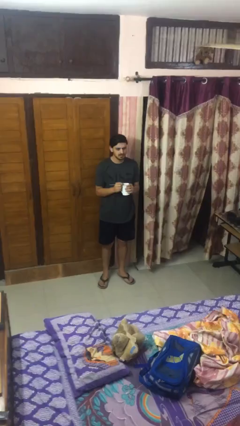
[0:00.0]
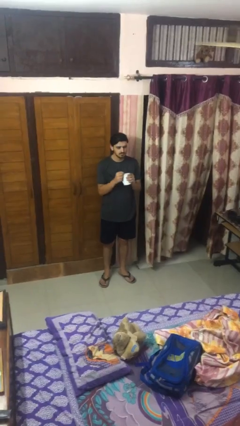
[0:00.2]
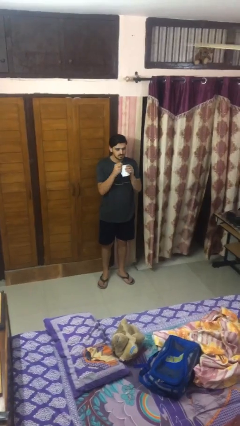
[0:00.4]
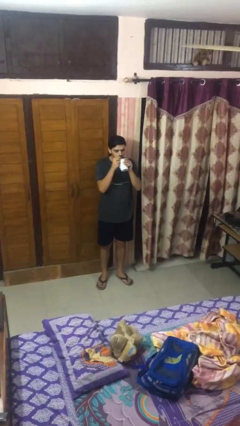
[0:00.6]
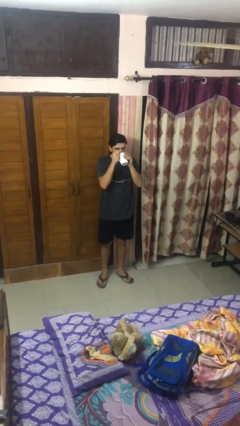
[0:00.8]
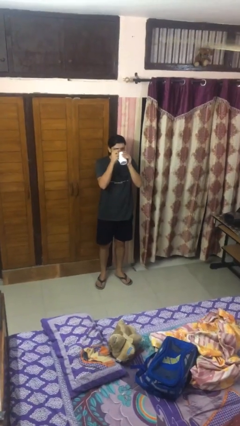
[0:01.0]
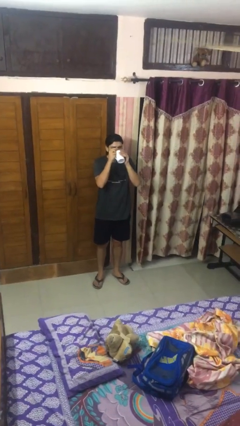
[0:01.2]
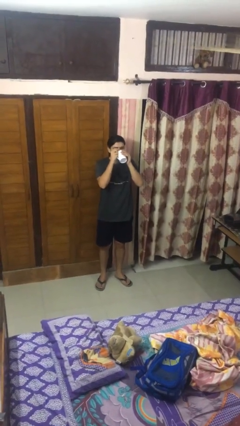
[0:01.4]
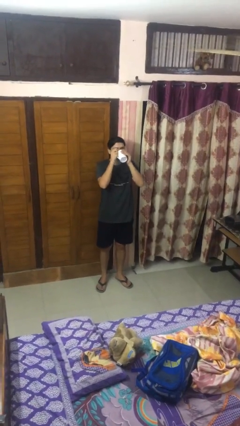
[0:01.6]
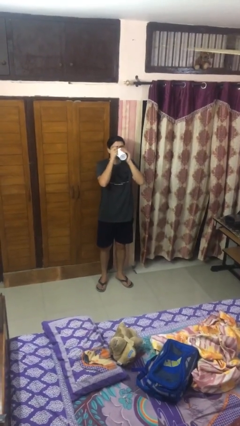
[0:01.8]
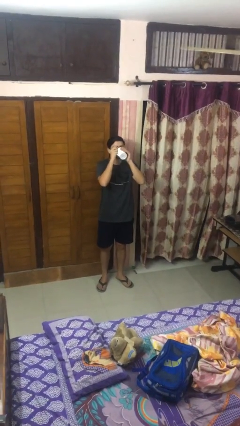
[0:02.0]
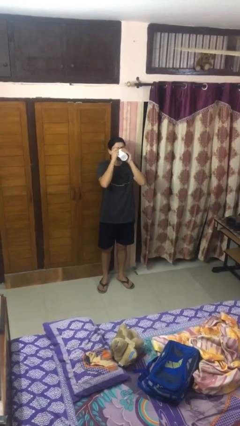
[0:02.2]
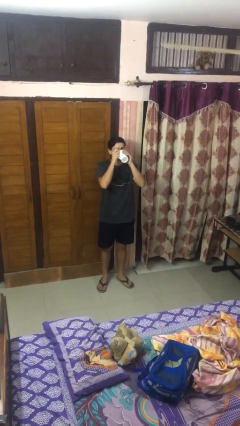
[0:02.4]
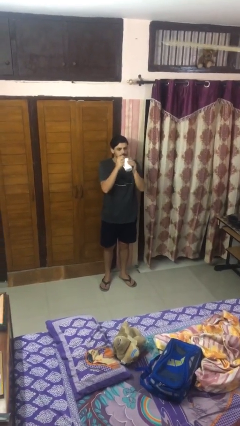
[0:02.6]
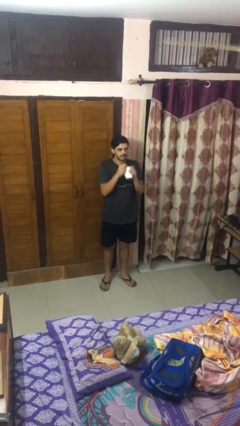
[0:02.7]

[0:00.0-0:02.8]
person drinks from mug

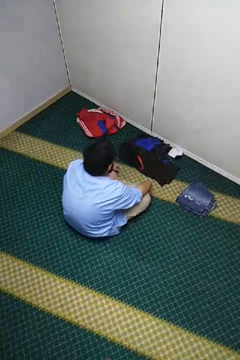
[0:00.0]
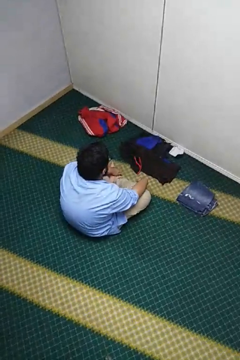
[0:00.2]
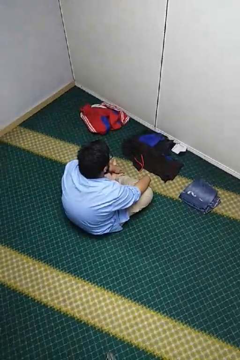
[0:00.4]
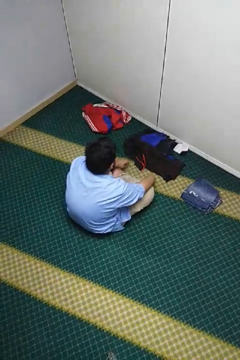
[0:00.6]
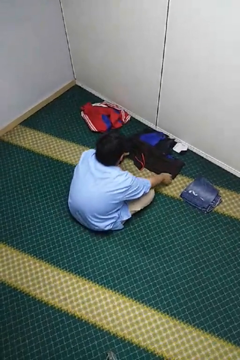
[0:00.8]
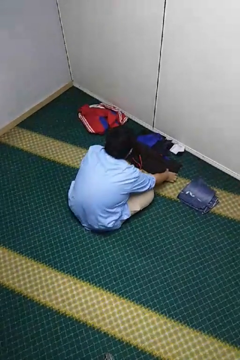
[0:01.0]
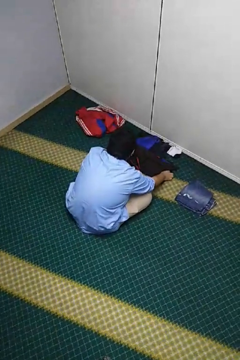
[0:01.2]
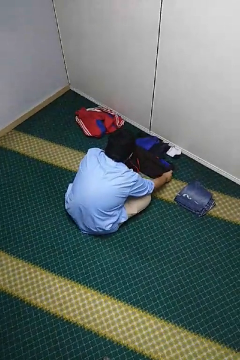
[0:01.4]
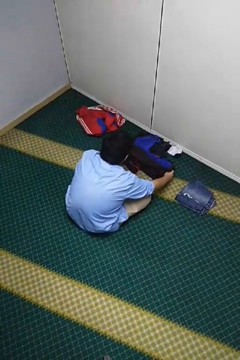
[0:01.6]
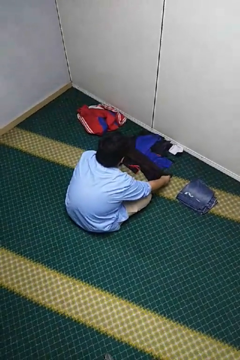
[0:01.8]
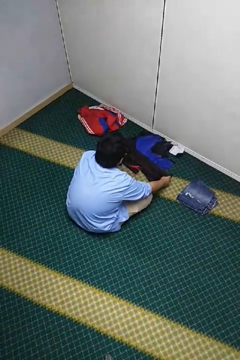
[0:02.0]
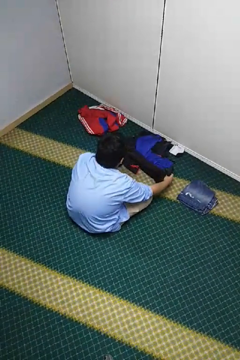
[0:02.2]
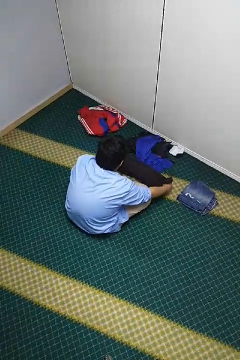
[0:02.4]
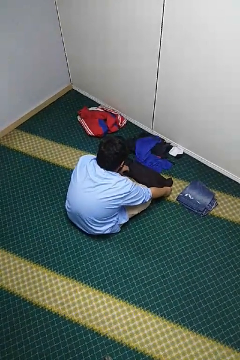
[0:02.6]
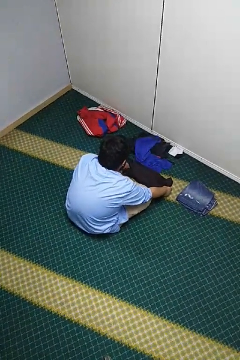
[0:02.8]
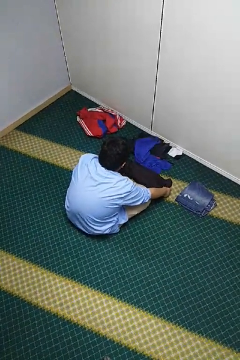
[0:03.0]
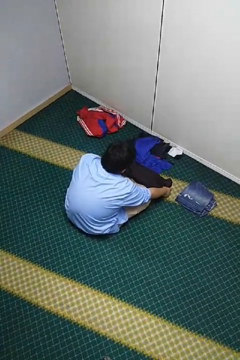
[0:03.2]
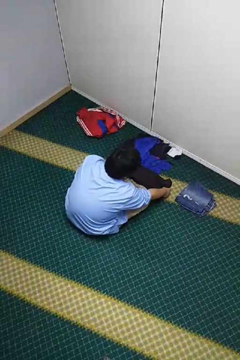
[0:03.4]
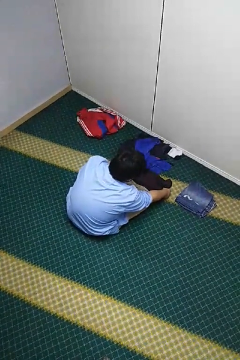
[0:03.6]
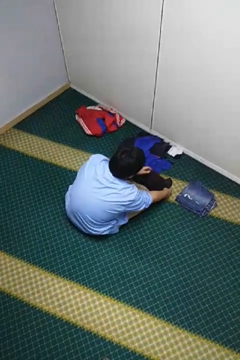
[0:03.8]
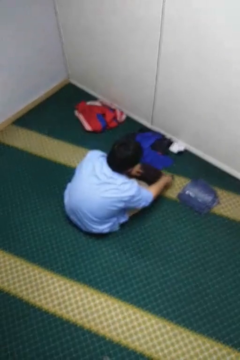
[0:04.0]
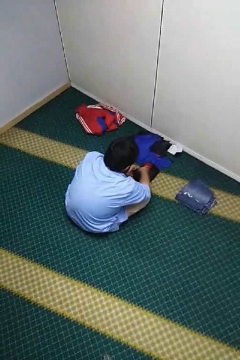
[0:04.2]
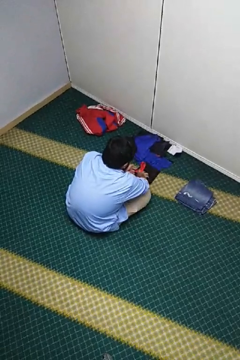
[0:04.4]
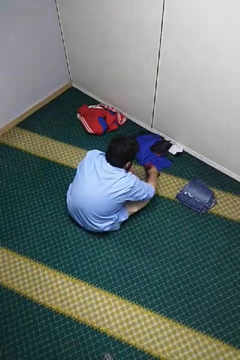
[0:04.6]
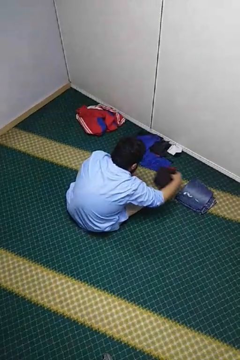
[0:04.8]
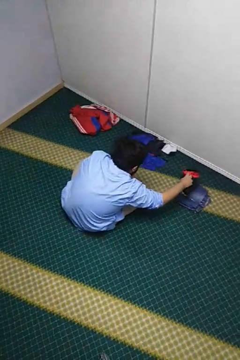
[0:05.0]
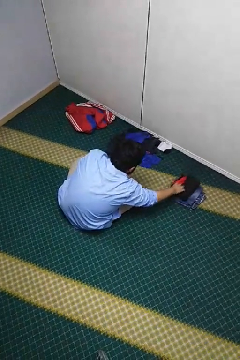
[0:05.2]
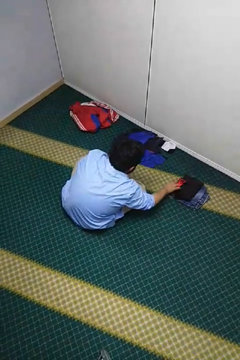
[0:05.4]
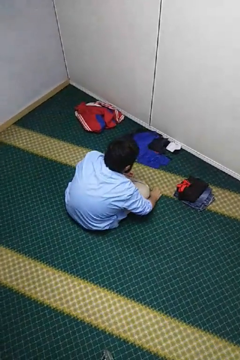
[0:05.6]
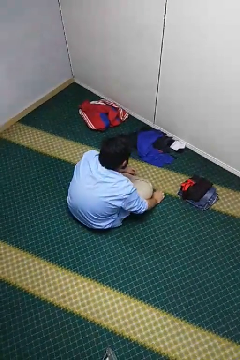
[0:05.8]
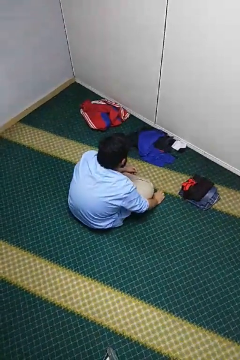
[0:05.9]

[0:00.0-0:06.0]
person folds shirt

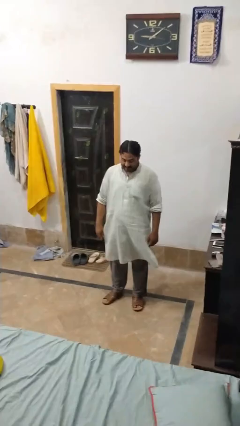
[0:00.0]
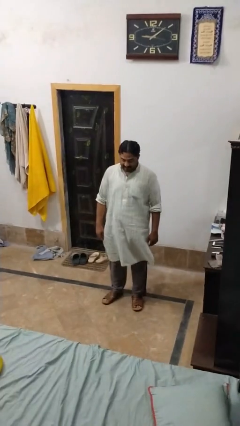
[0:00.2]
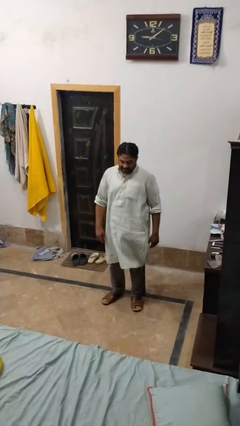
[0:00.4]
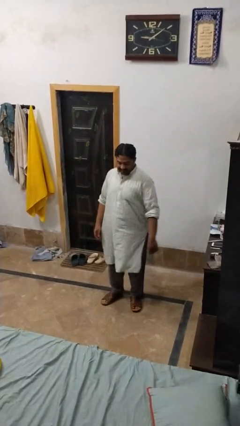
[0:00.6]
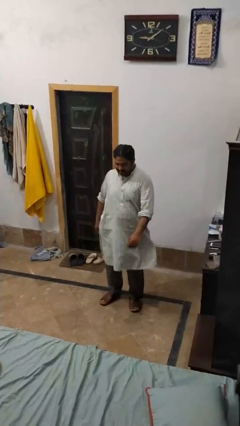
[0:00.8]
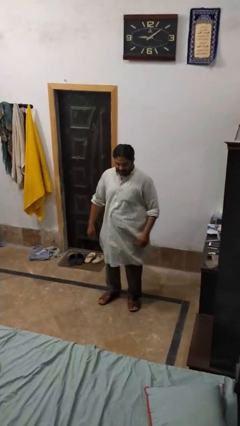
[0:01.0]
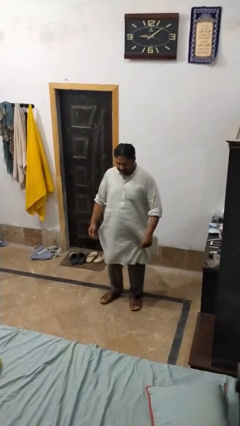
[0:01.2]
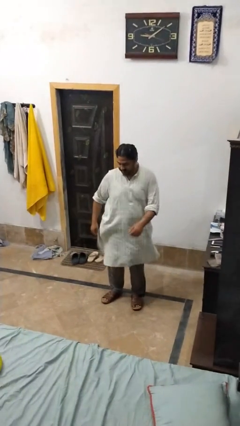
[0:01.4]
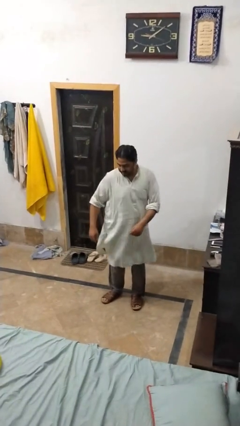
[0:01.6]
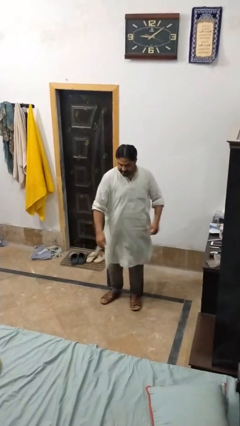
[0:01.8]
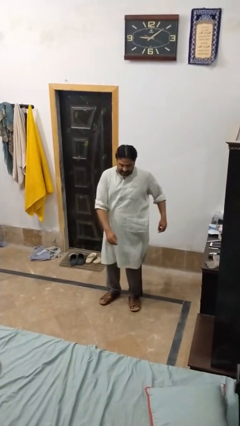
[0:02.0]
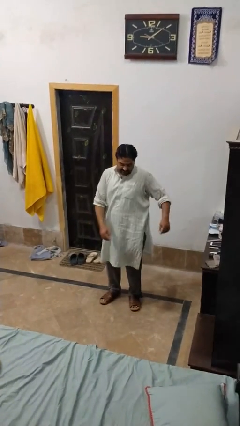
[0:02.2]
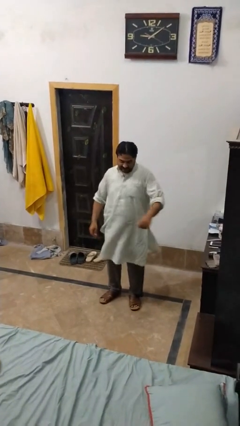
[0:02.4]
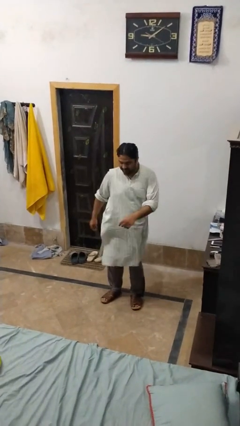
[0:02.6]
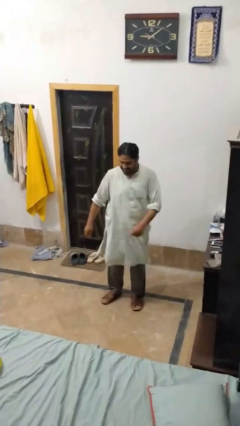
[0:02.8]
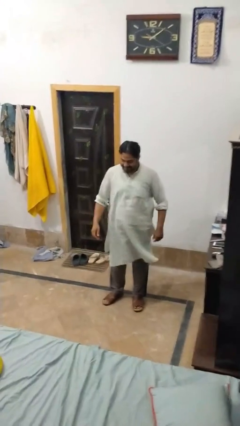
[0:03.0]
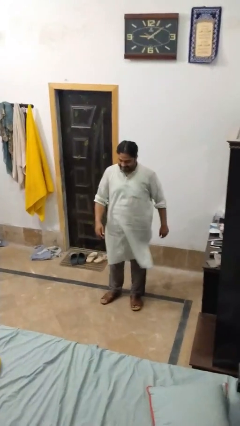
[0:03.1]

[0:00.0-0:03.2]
person wiggles hips

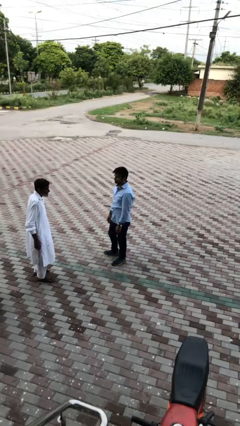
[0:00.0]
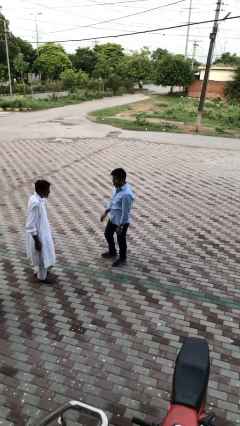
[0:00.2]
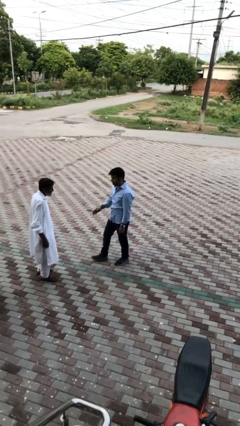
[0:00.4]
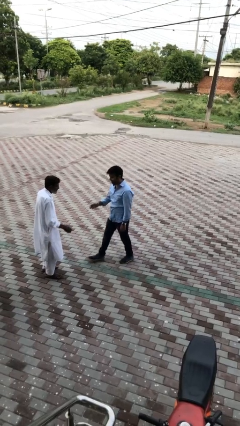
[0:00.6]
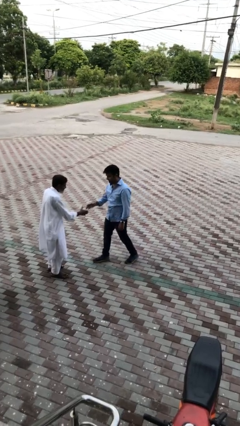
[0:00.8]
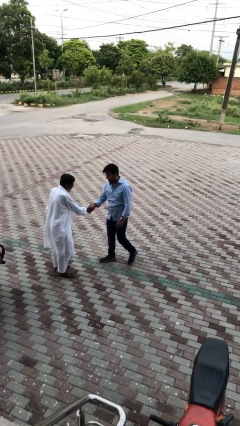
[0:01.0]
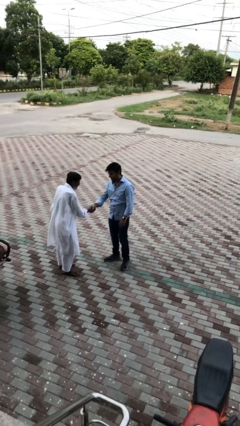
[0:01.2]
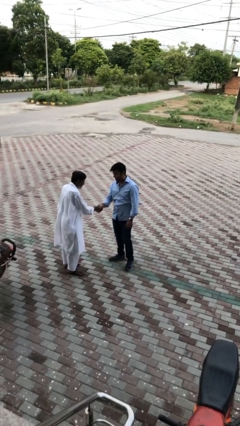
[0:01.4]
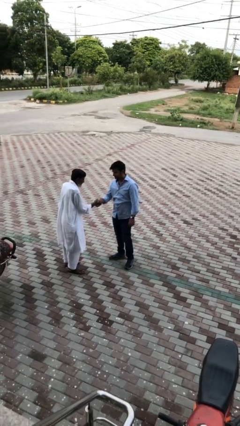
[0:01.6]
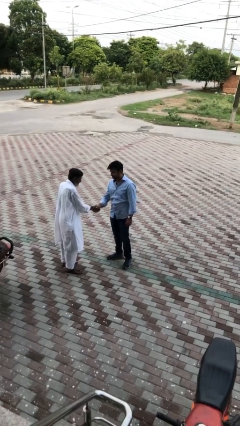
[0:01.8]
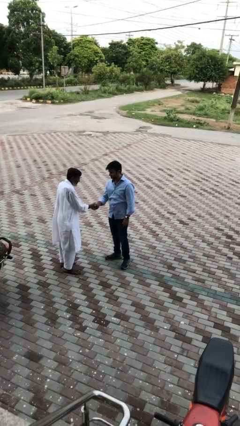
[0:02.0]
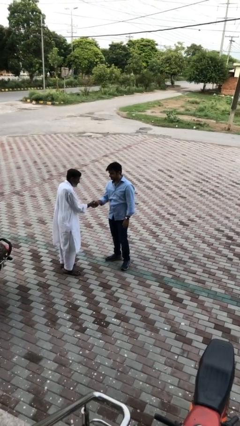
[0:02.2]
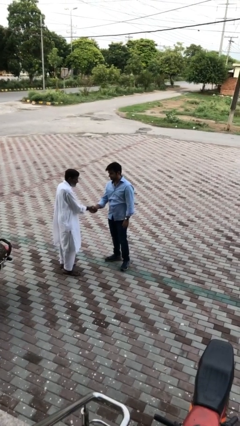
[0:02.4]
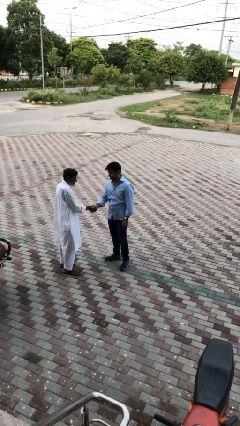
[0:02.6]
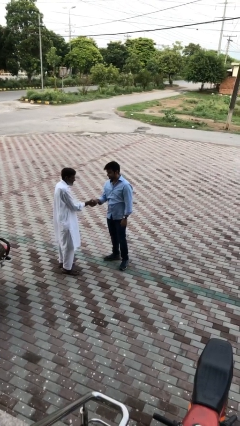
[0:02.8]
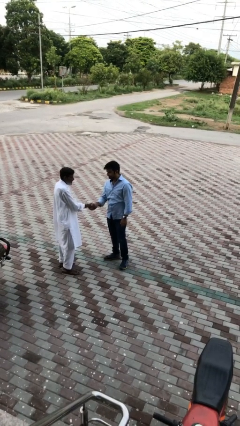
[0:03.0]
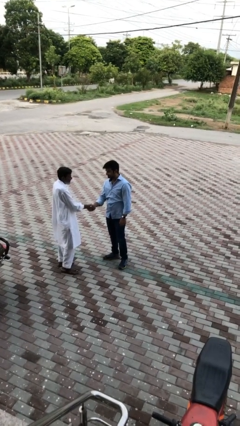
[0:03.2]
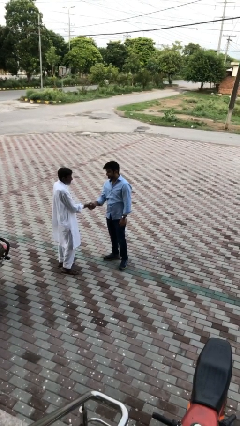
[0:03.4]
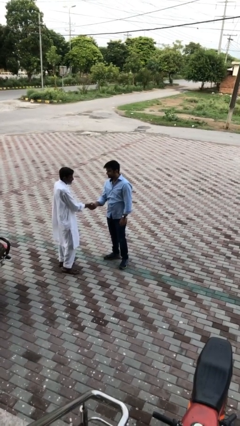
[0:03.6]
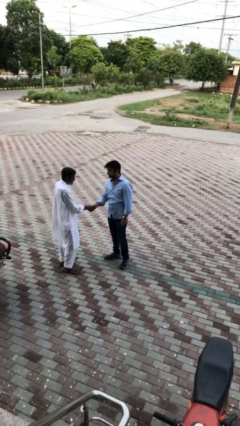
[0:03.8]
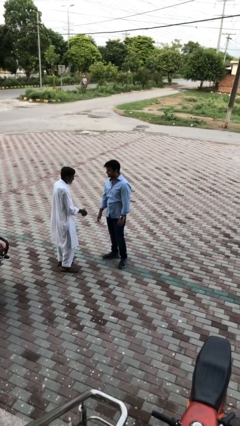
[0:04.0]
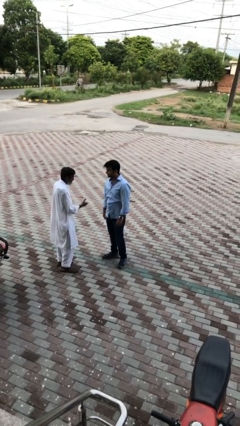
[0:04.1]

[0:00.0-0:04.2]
person shakes hand

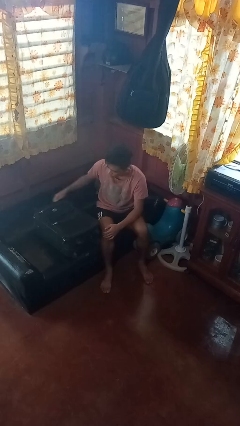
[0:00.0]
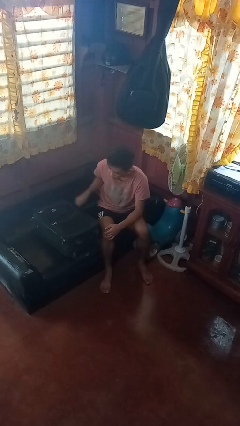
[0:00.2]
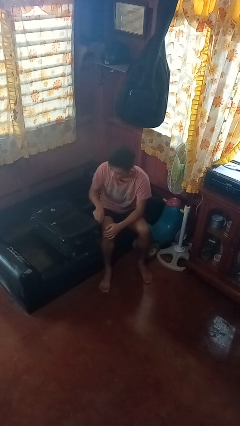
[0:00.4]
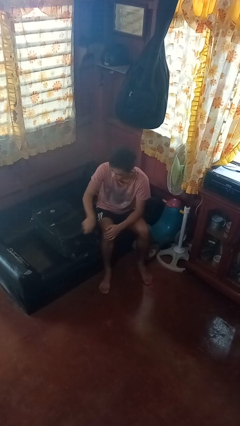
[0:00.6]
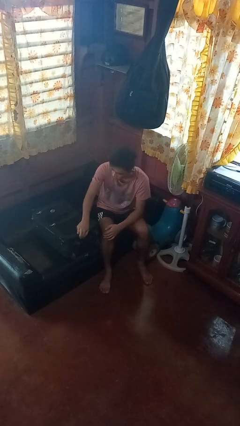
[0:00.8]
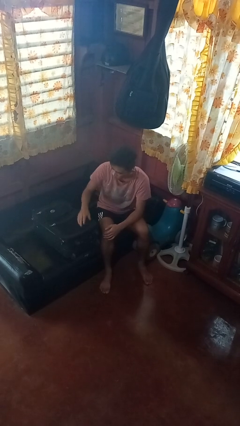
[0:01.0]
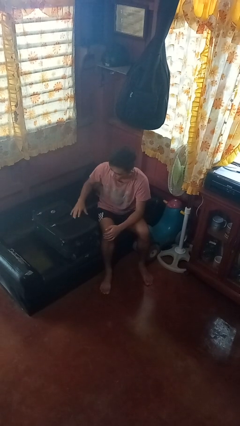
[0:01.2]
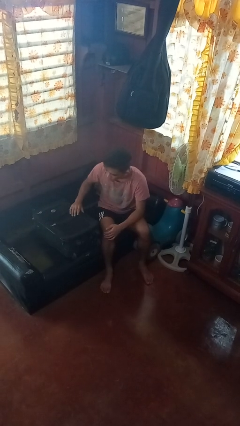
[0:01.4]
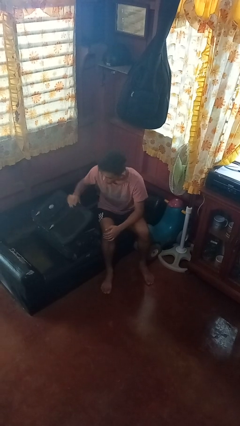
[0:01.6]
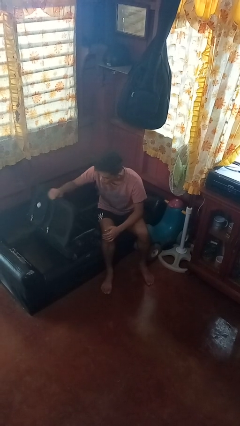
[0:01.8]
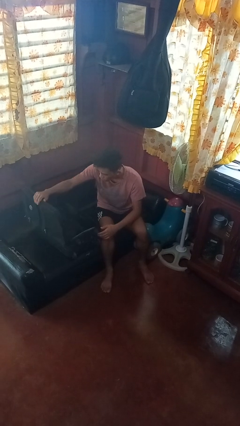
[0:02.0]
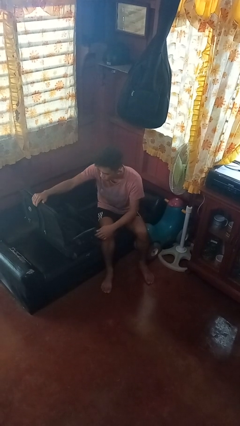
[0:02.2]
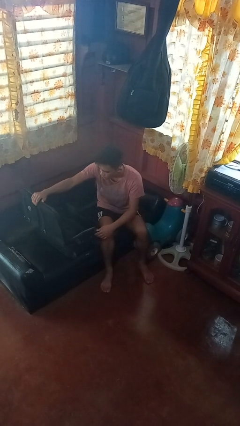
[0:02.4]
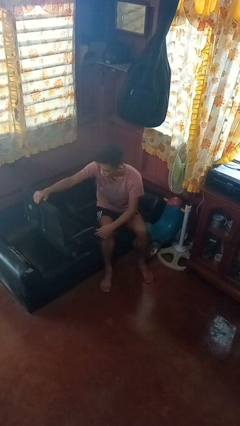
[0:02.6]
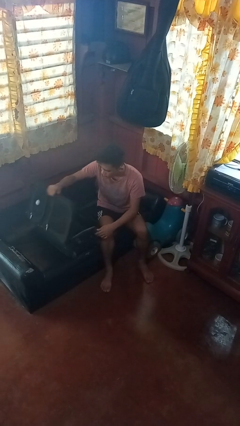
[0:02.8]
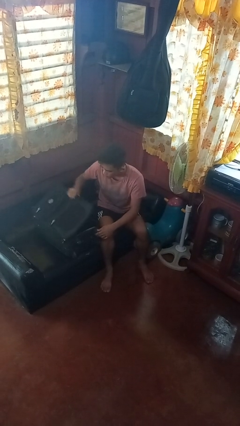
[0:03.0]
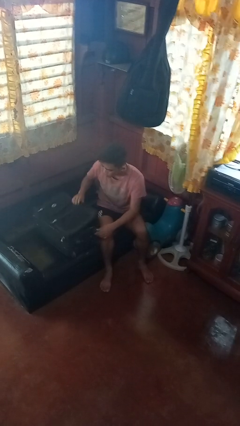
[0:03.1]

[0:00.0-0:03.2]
person opens suitcase
